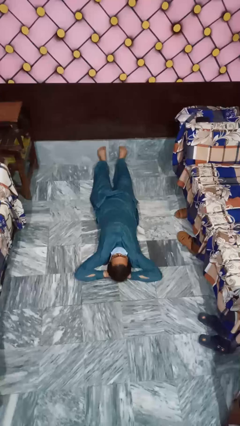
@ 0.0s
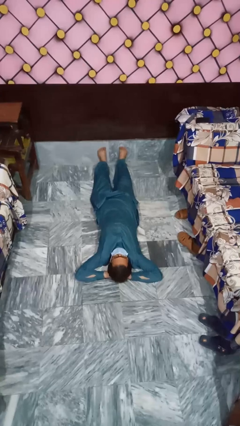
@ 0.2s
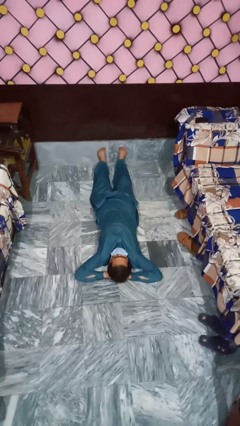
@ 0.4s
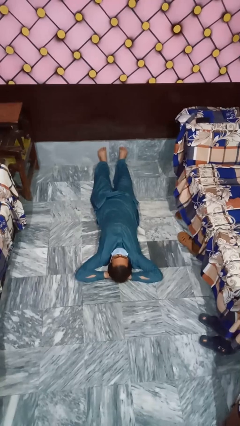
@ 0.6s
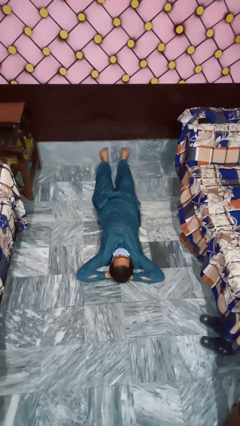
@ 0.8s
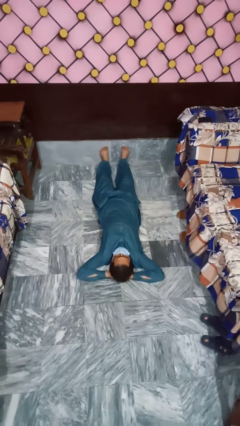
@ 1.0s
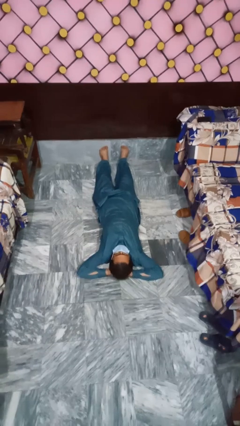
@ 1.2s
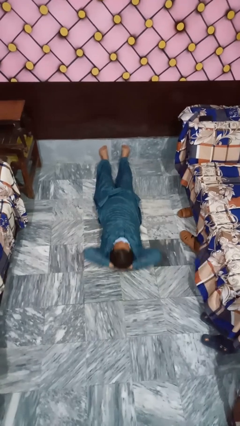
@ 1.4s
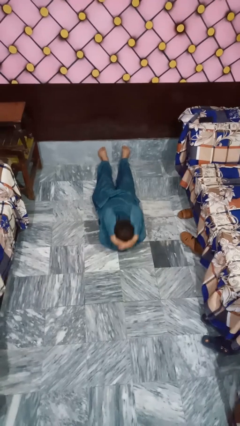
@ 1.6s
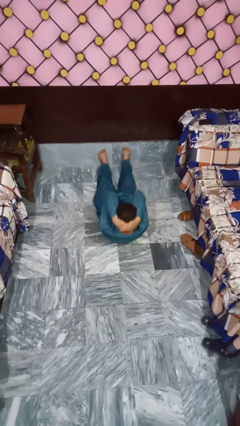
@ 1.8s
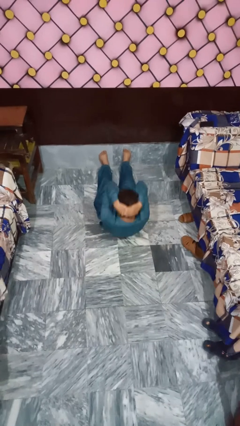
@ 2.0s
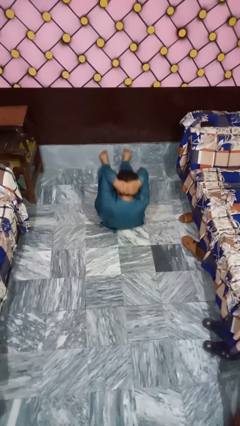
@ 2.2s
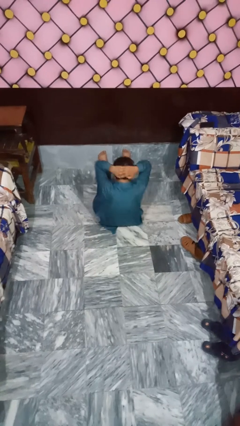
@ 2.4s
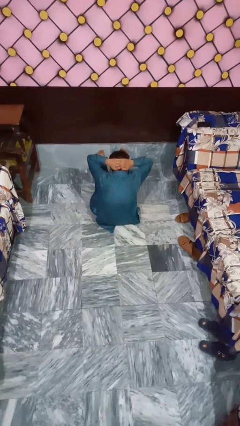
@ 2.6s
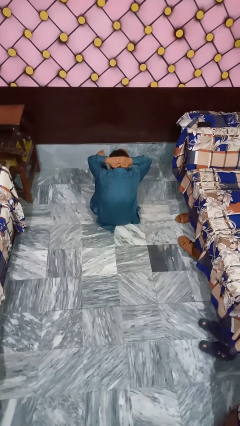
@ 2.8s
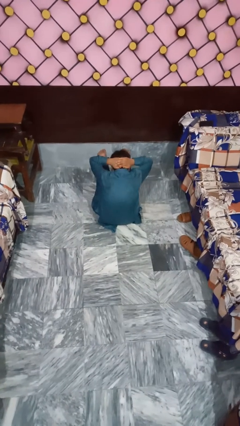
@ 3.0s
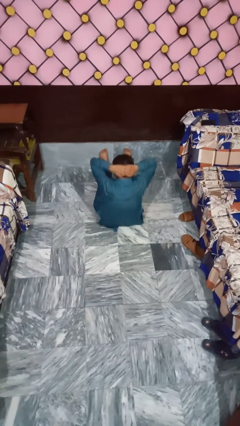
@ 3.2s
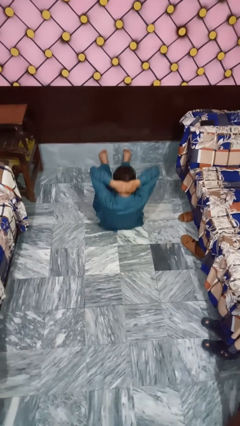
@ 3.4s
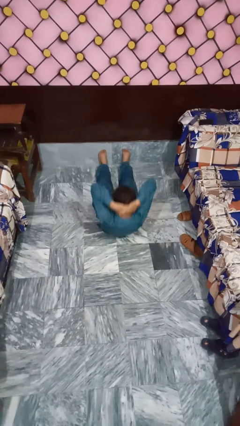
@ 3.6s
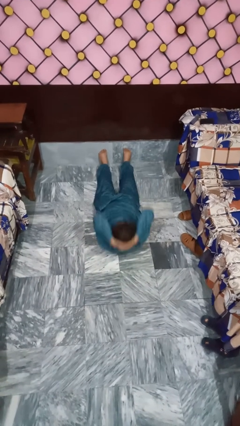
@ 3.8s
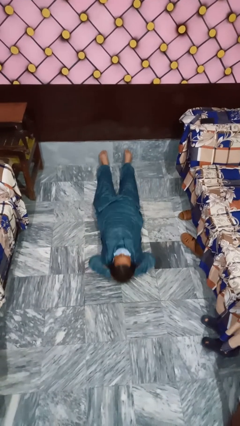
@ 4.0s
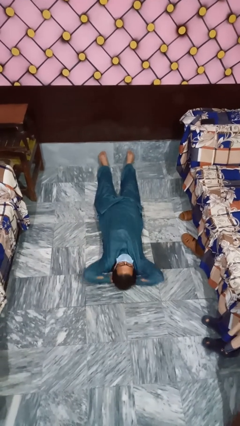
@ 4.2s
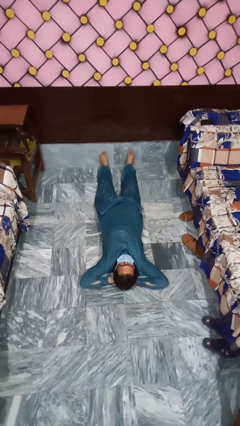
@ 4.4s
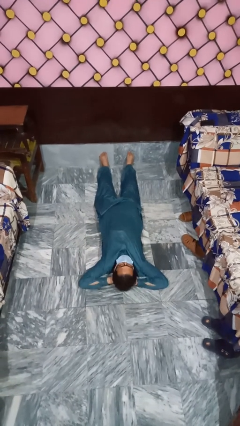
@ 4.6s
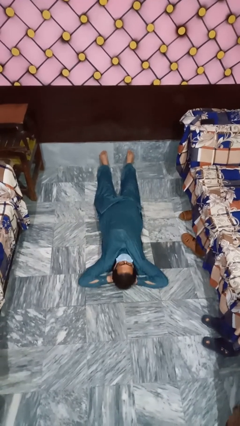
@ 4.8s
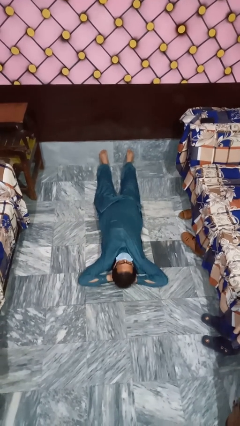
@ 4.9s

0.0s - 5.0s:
person exercises with situp

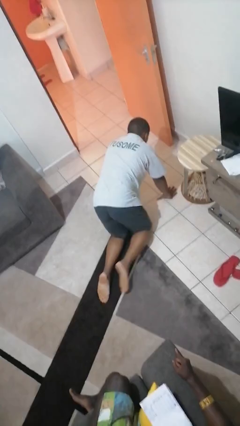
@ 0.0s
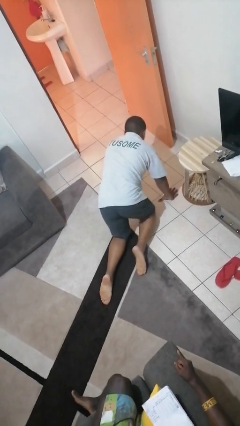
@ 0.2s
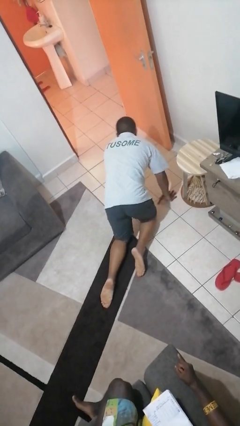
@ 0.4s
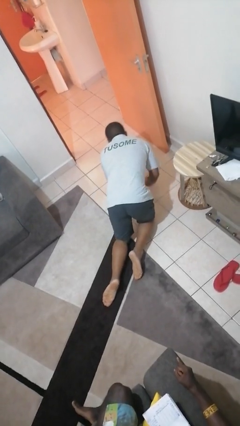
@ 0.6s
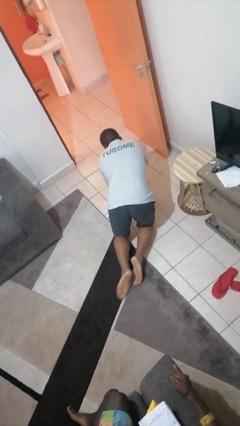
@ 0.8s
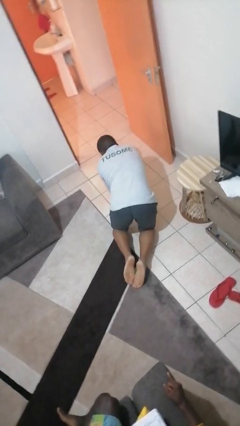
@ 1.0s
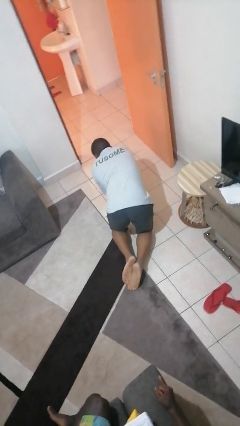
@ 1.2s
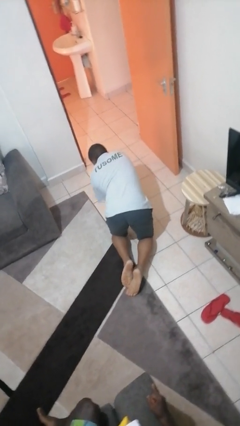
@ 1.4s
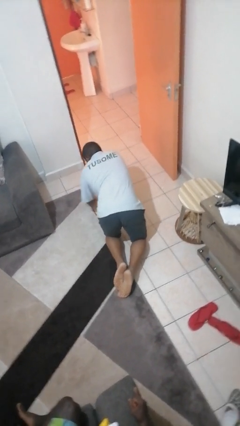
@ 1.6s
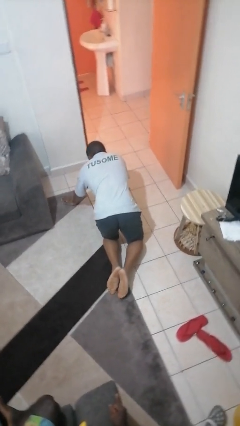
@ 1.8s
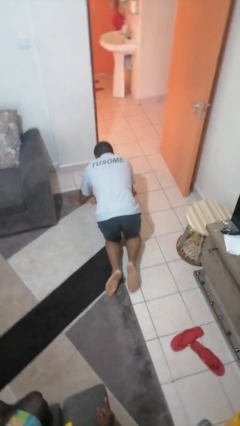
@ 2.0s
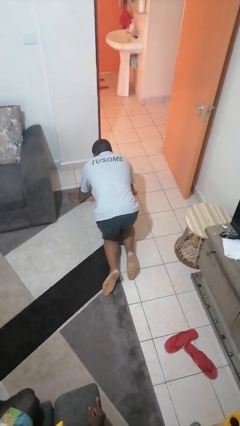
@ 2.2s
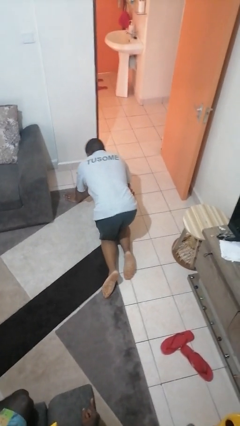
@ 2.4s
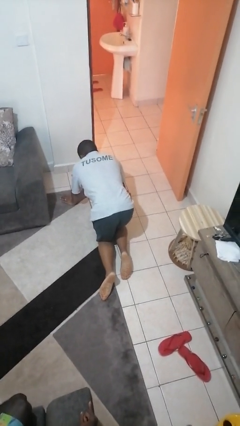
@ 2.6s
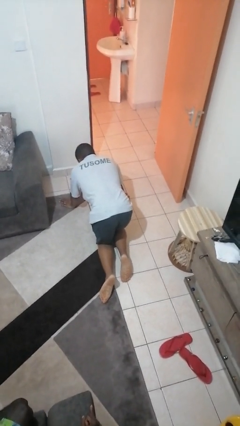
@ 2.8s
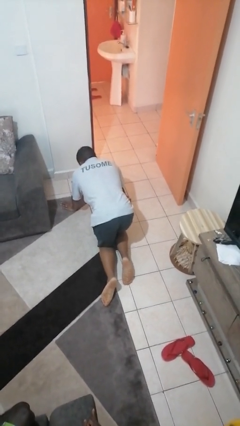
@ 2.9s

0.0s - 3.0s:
person crawls

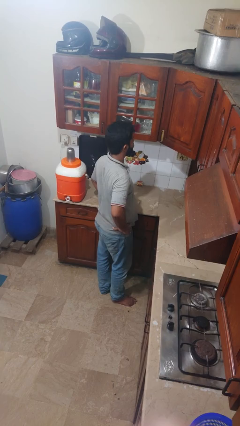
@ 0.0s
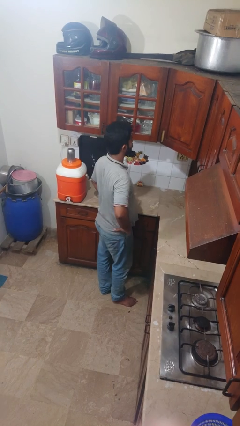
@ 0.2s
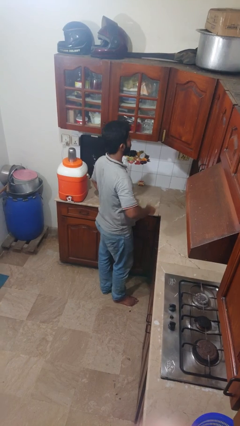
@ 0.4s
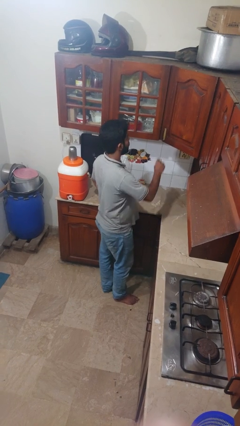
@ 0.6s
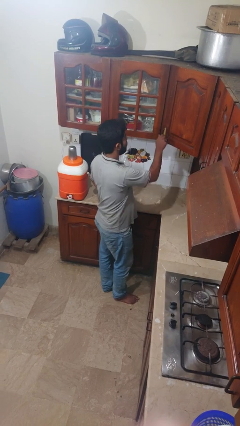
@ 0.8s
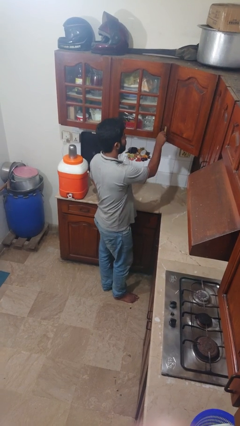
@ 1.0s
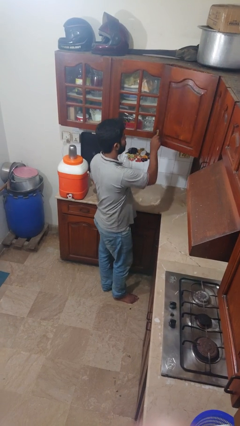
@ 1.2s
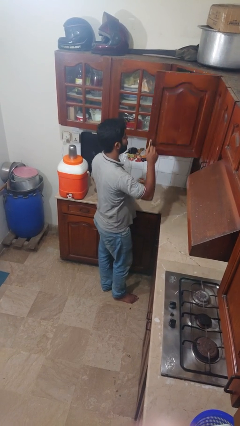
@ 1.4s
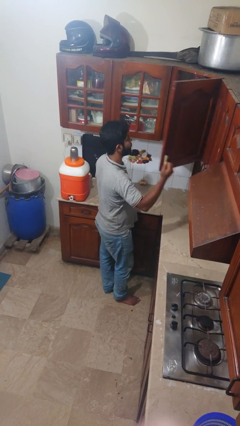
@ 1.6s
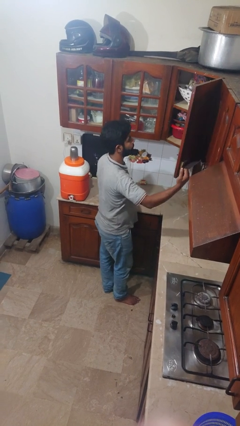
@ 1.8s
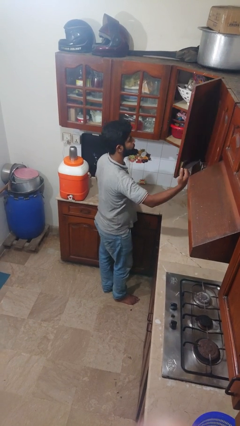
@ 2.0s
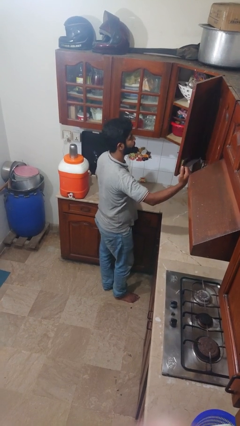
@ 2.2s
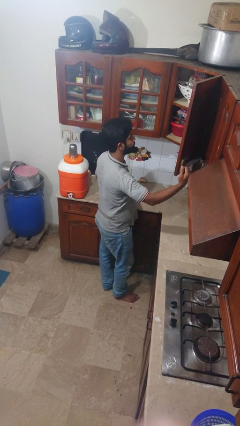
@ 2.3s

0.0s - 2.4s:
person closes cabinet

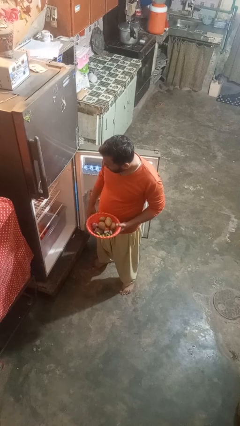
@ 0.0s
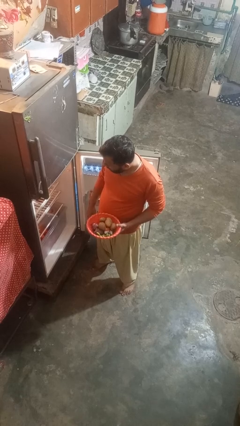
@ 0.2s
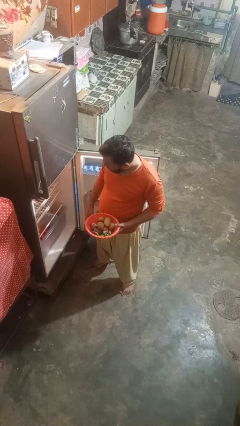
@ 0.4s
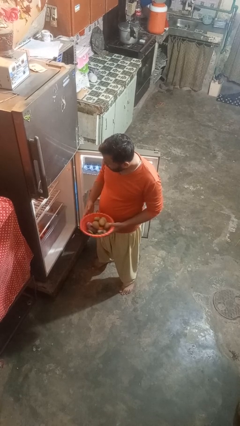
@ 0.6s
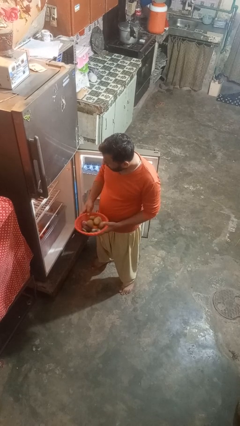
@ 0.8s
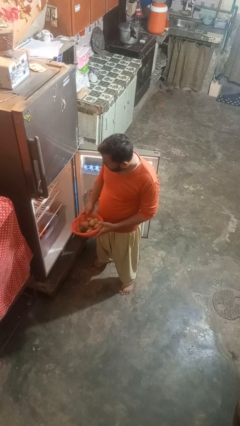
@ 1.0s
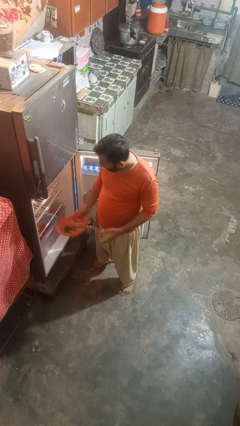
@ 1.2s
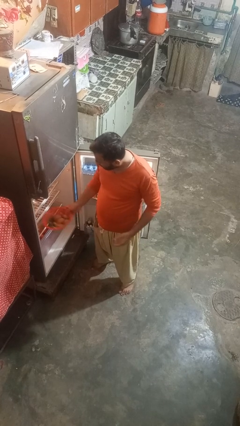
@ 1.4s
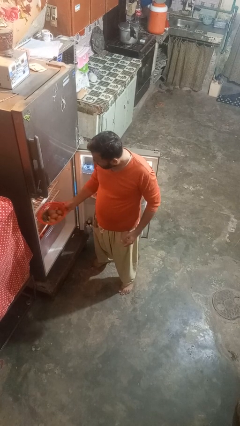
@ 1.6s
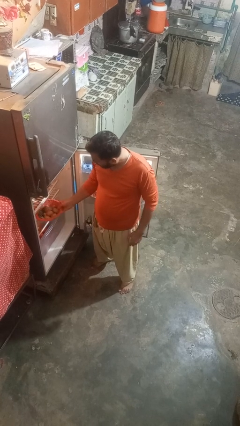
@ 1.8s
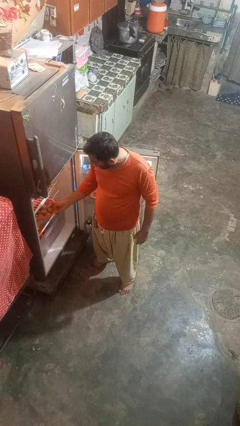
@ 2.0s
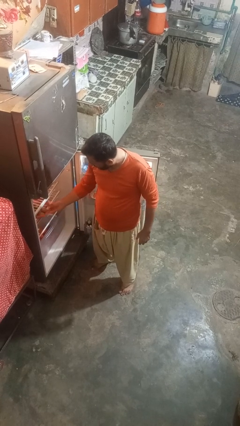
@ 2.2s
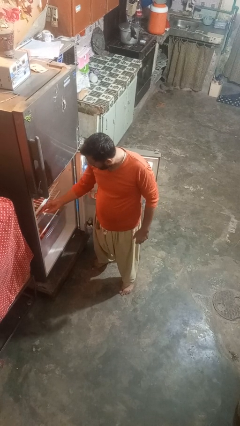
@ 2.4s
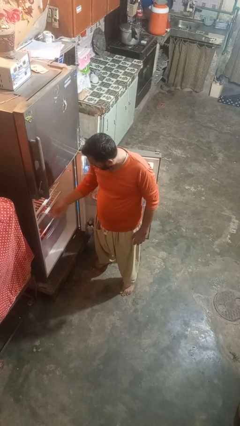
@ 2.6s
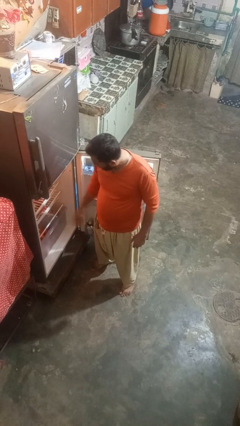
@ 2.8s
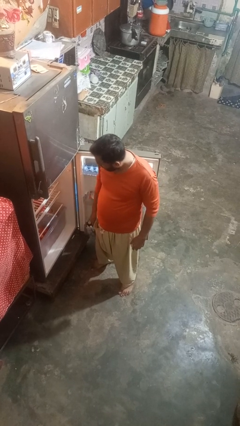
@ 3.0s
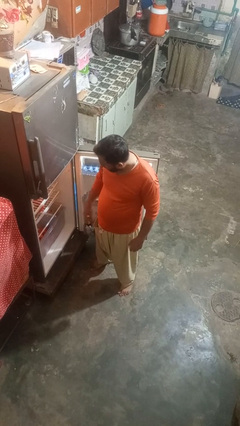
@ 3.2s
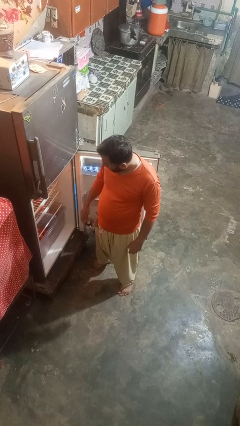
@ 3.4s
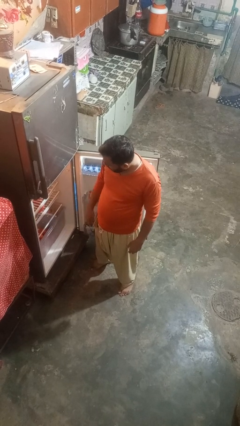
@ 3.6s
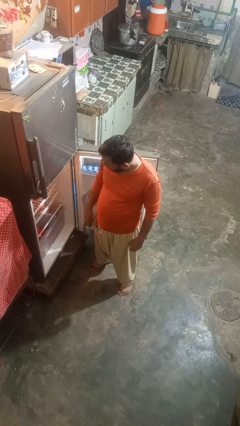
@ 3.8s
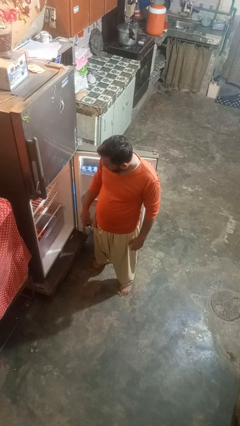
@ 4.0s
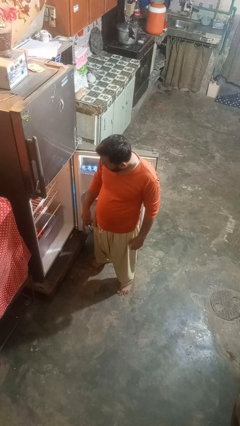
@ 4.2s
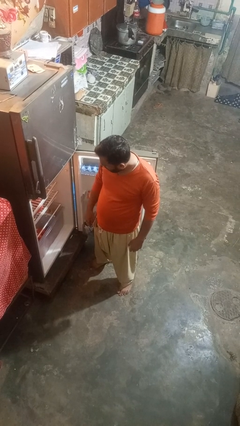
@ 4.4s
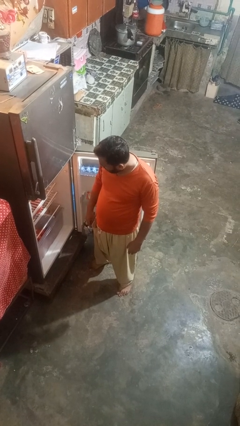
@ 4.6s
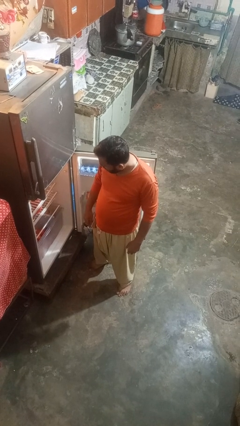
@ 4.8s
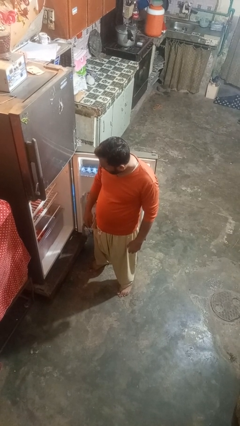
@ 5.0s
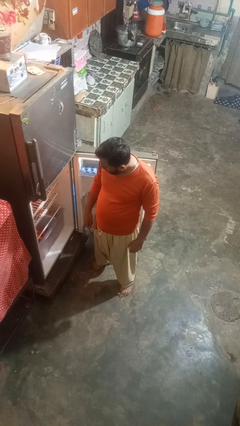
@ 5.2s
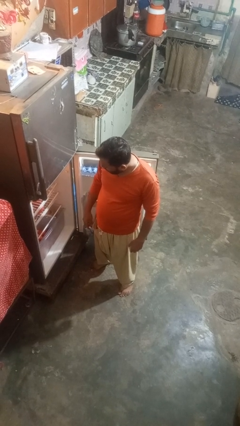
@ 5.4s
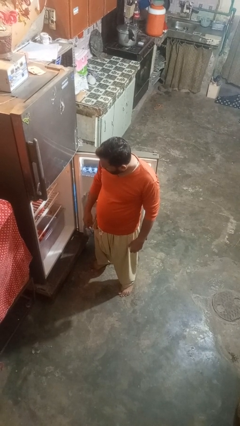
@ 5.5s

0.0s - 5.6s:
person puts object into refrigerator

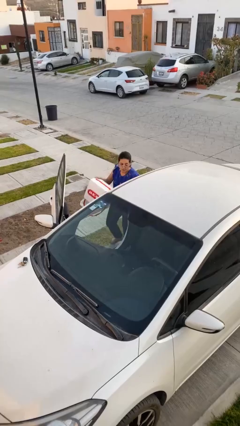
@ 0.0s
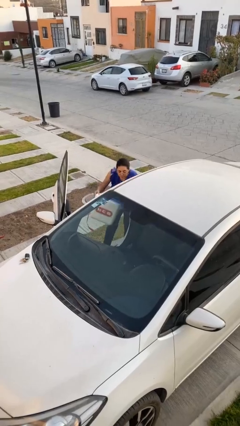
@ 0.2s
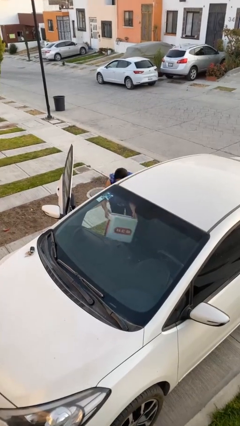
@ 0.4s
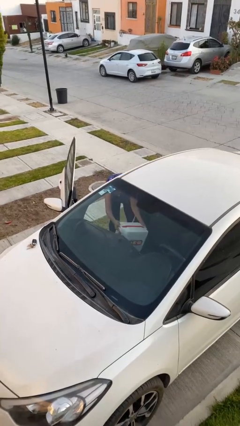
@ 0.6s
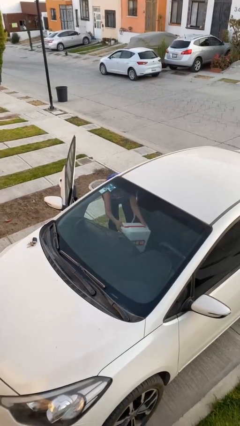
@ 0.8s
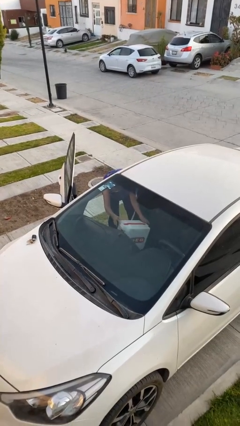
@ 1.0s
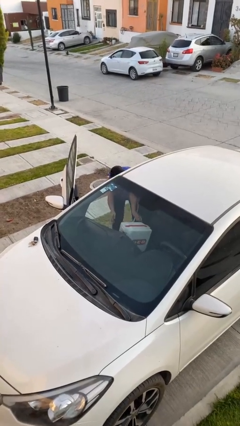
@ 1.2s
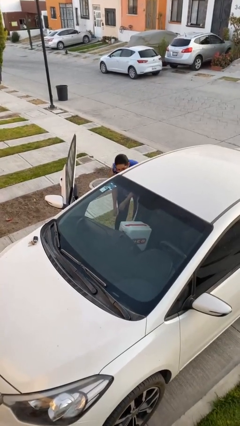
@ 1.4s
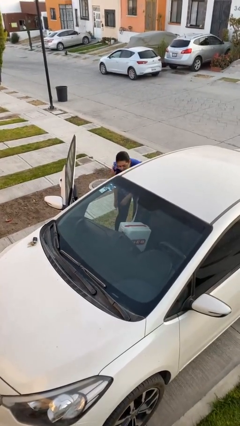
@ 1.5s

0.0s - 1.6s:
person loads car
